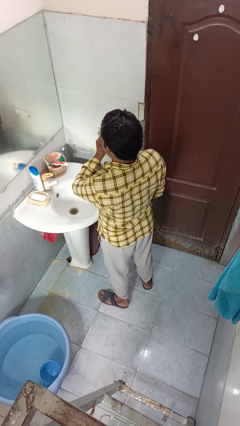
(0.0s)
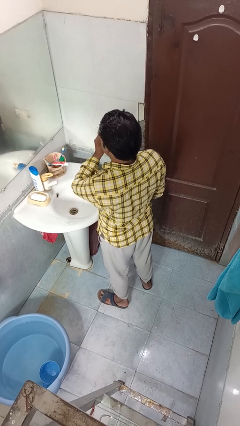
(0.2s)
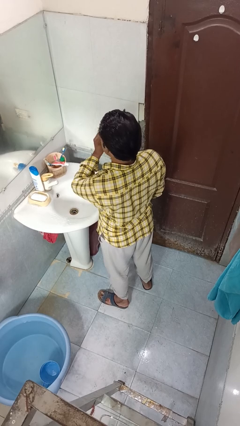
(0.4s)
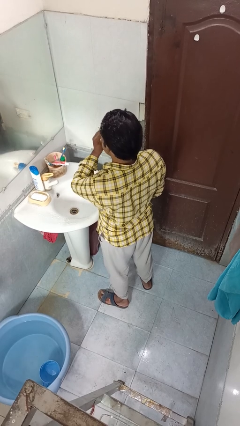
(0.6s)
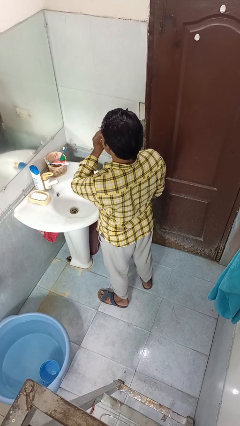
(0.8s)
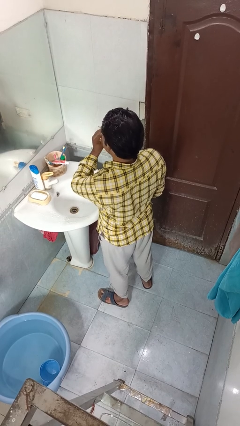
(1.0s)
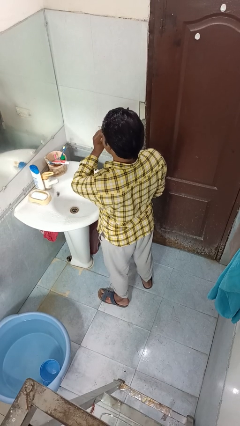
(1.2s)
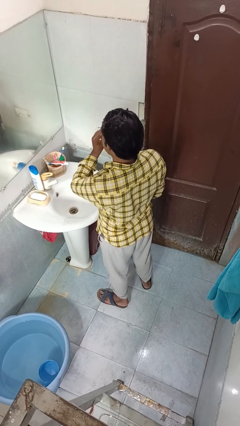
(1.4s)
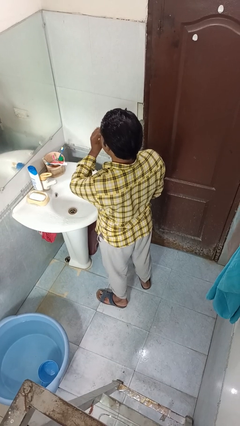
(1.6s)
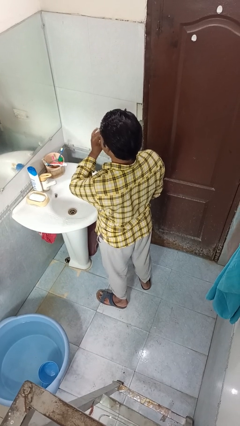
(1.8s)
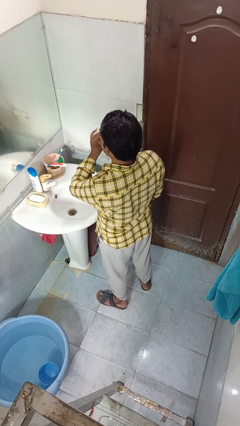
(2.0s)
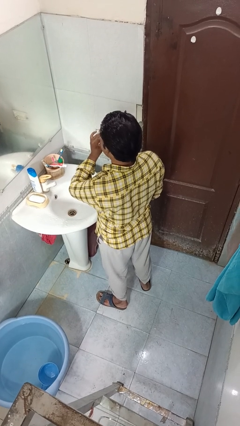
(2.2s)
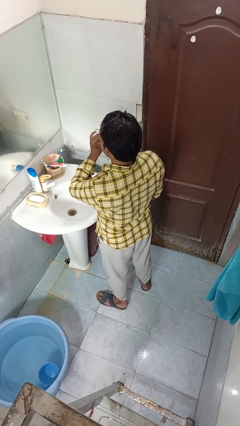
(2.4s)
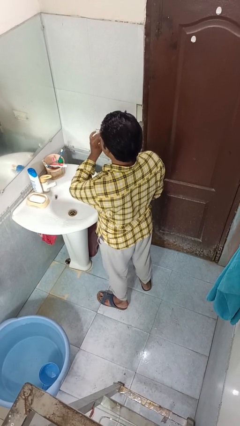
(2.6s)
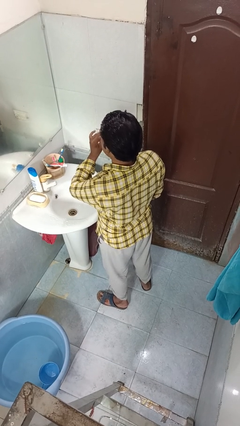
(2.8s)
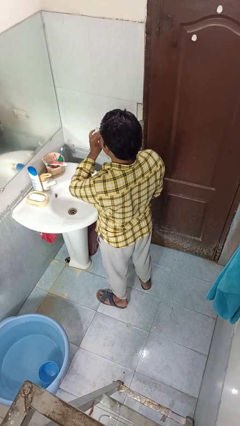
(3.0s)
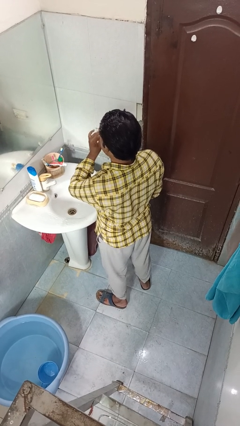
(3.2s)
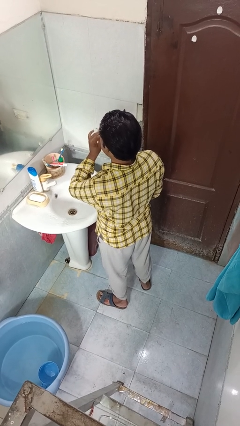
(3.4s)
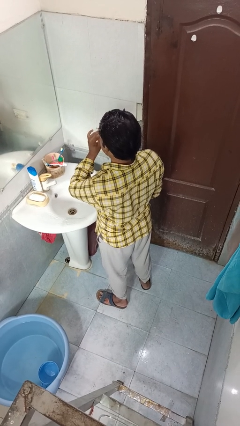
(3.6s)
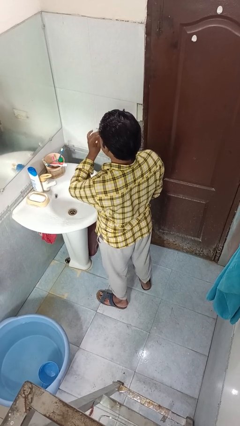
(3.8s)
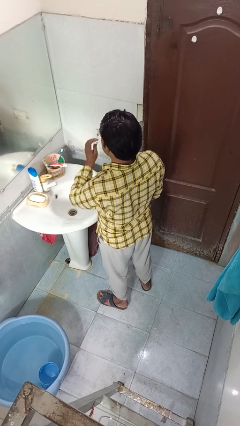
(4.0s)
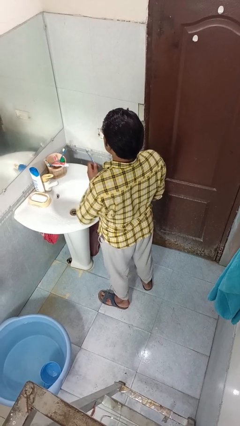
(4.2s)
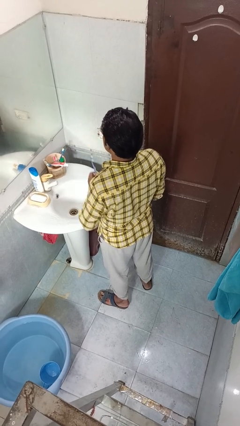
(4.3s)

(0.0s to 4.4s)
person brushes teeth

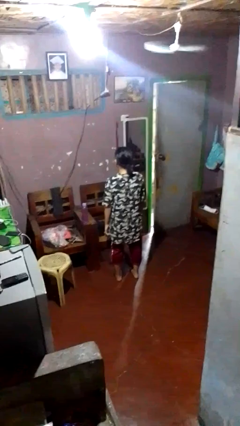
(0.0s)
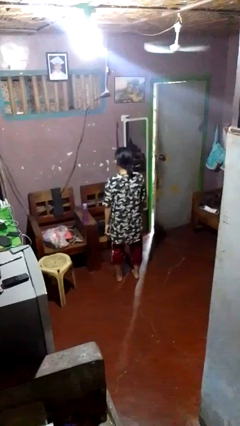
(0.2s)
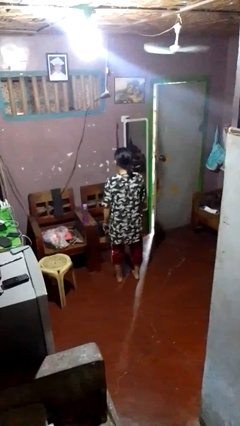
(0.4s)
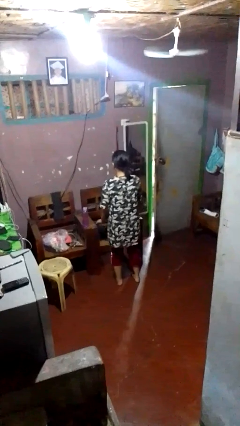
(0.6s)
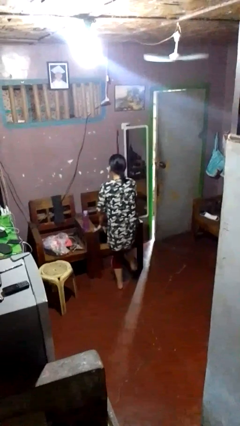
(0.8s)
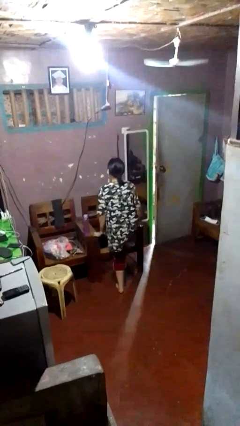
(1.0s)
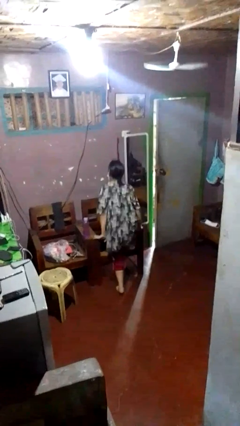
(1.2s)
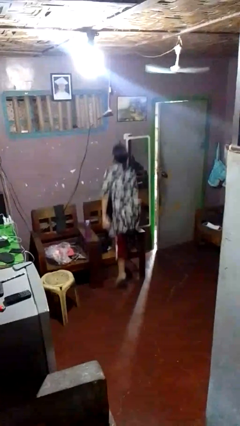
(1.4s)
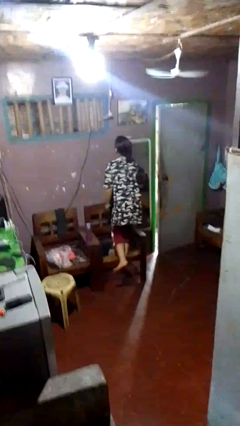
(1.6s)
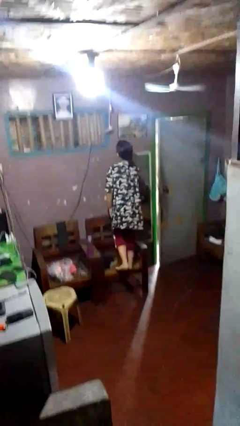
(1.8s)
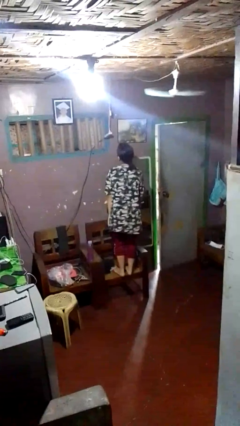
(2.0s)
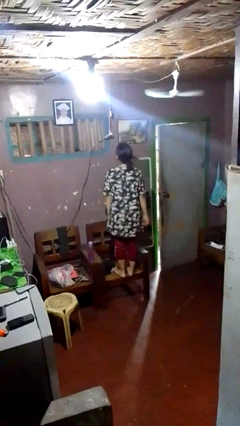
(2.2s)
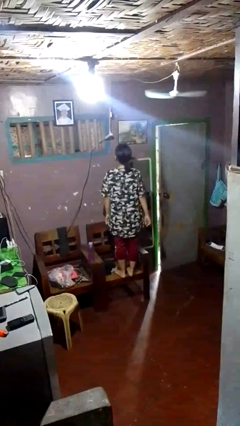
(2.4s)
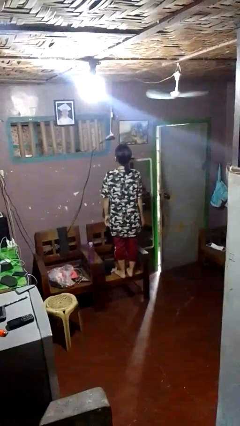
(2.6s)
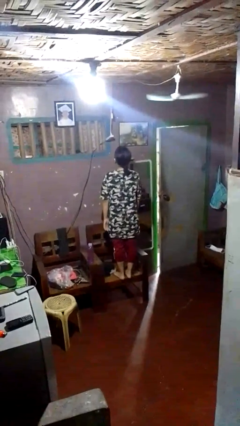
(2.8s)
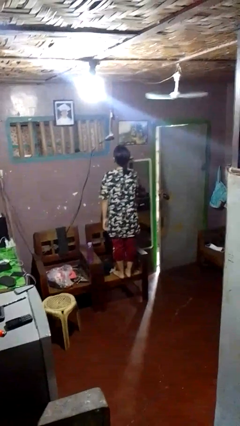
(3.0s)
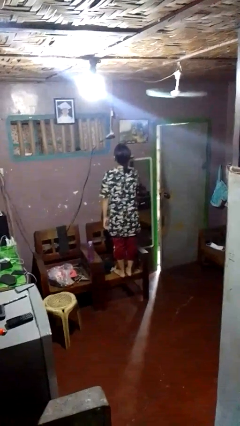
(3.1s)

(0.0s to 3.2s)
person climbs on chair

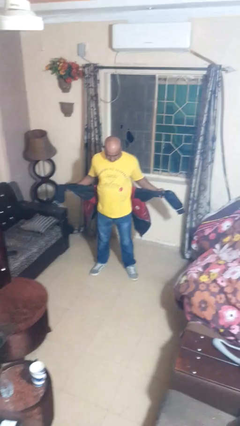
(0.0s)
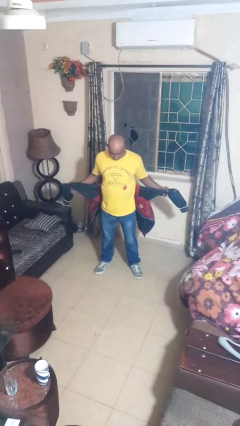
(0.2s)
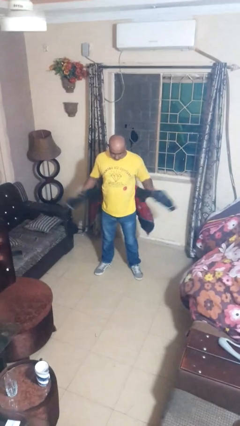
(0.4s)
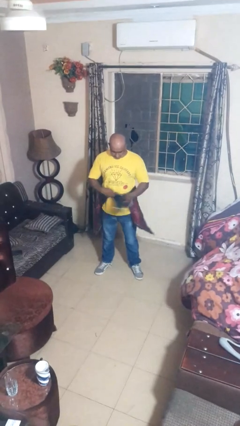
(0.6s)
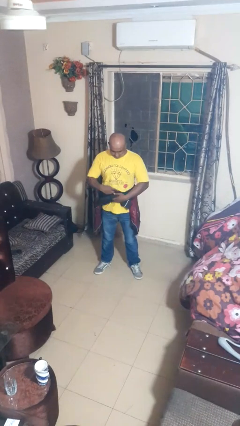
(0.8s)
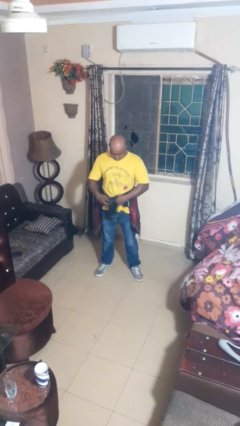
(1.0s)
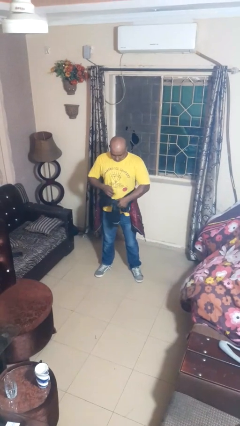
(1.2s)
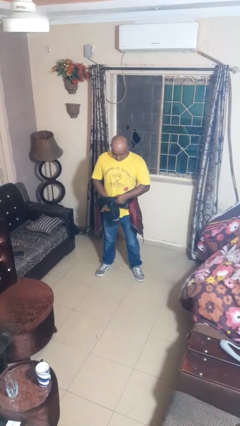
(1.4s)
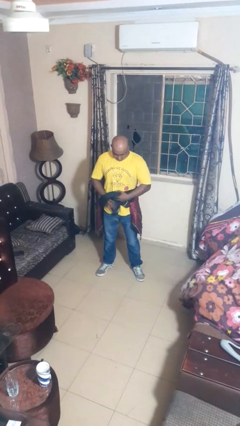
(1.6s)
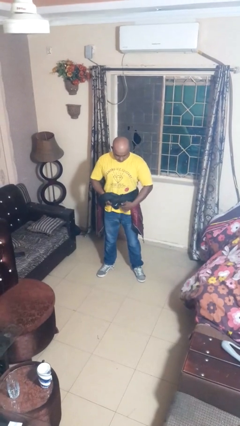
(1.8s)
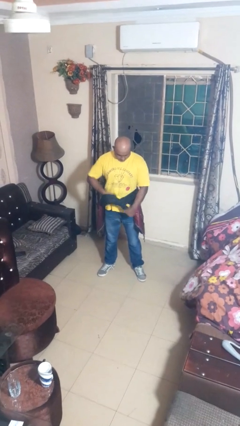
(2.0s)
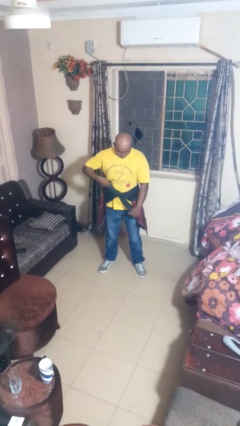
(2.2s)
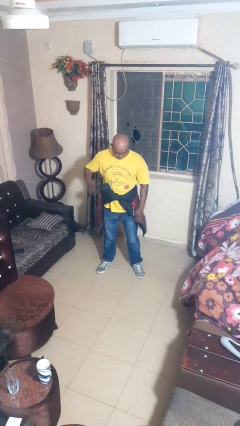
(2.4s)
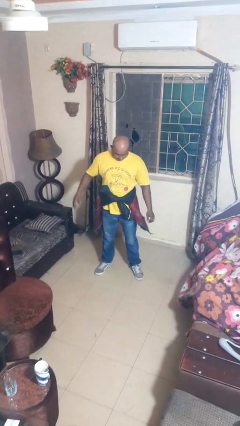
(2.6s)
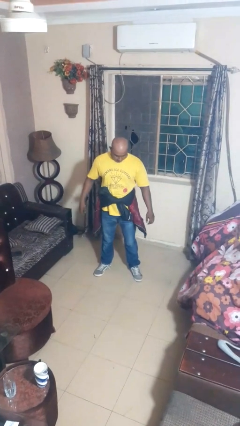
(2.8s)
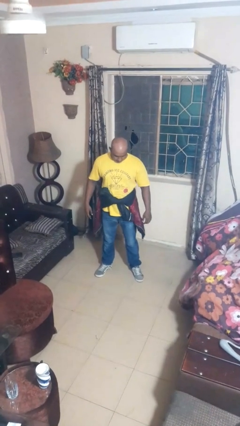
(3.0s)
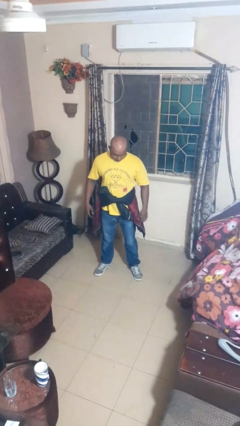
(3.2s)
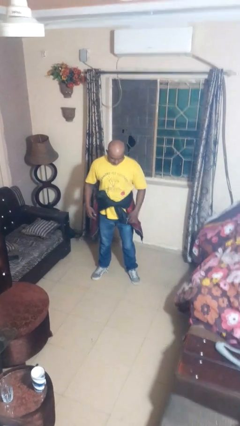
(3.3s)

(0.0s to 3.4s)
person ties jacket around waist

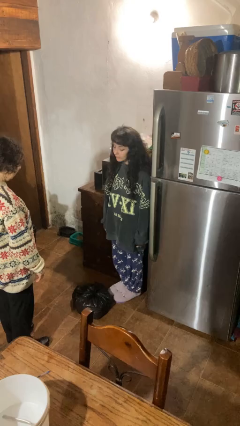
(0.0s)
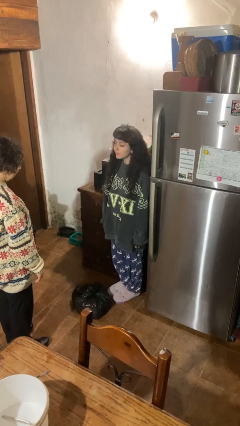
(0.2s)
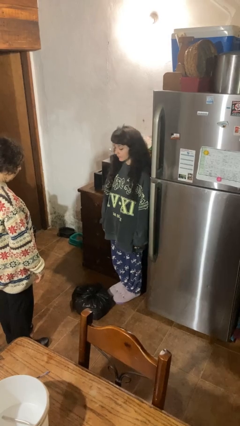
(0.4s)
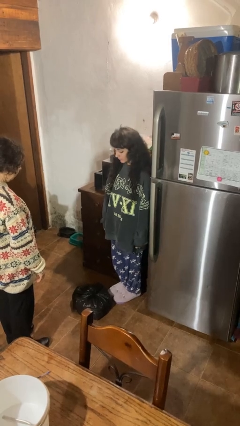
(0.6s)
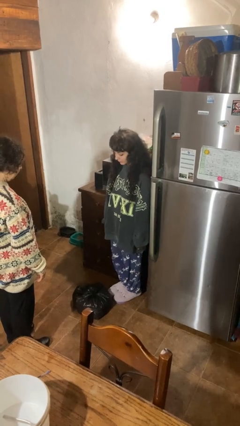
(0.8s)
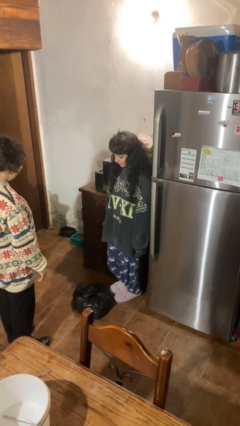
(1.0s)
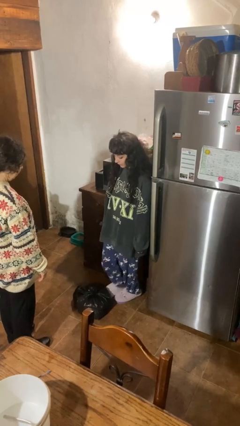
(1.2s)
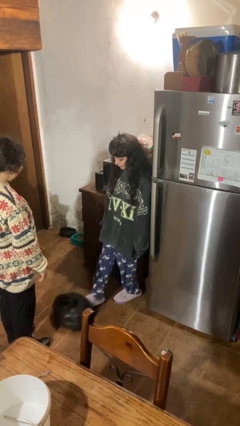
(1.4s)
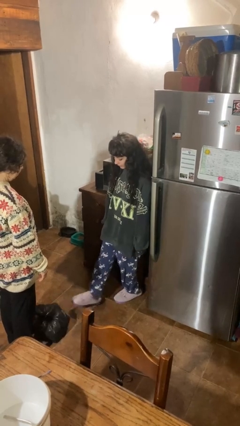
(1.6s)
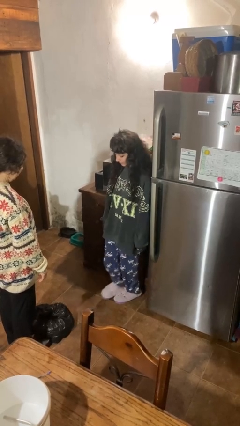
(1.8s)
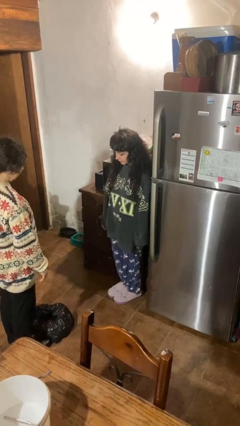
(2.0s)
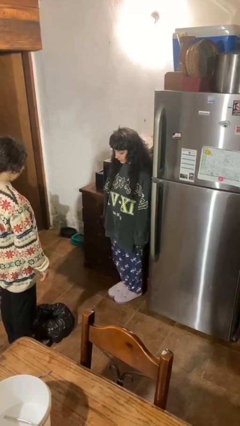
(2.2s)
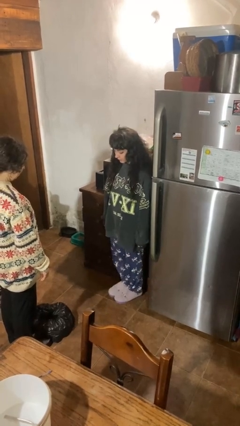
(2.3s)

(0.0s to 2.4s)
person kicks object to person

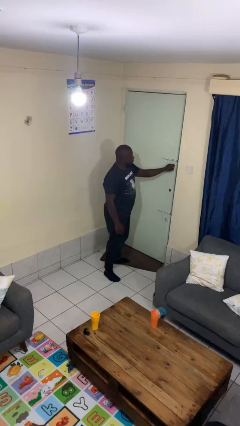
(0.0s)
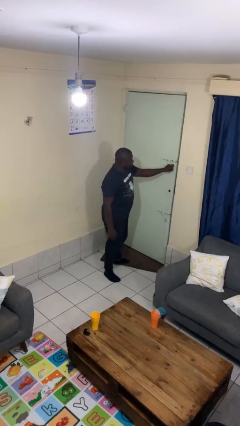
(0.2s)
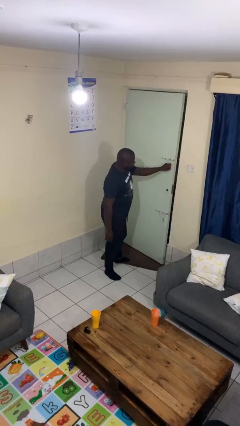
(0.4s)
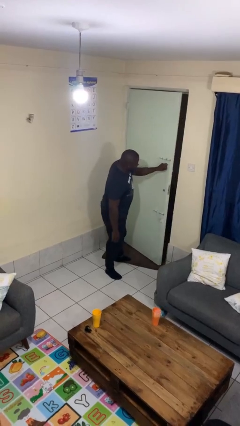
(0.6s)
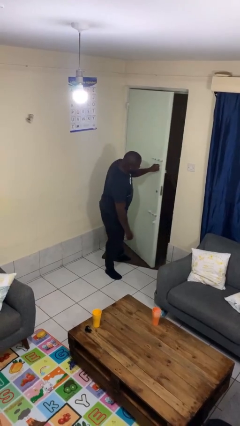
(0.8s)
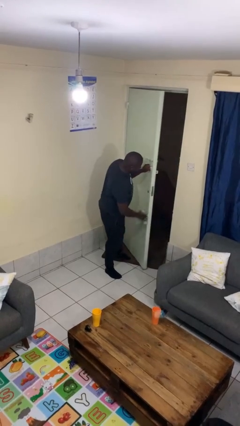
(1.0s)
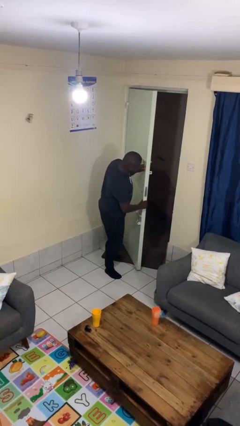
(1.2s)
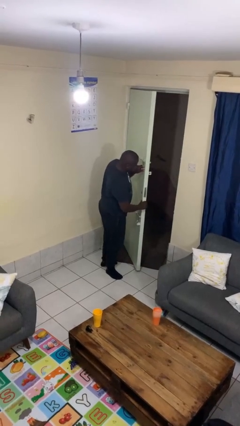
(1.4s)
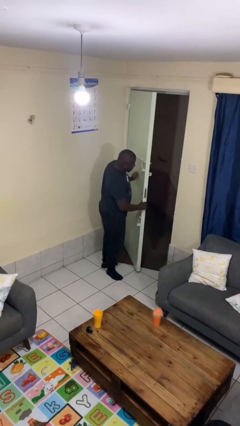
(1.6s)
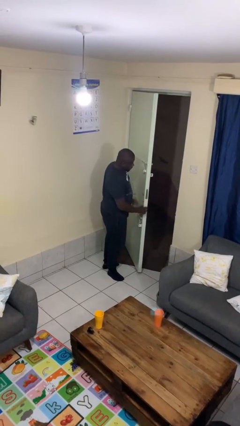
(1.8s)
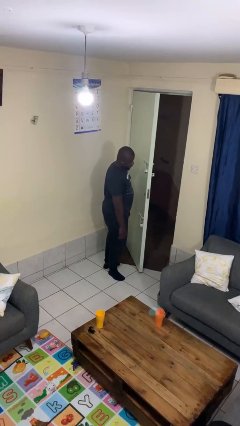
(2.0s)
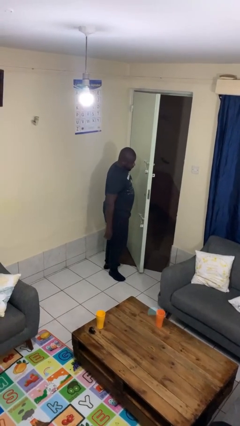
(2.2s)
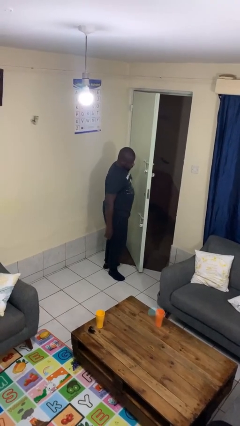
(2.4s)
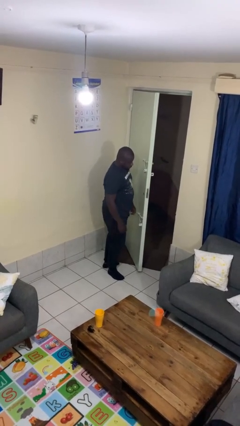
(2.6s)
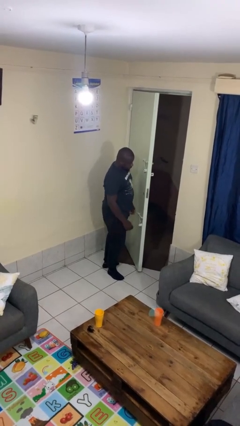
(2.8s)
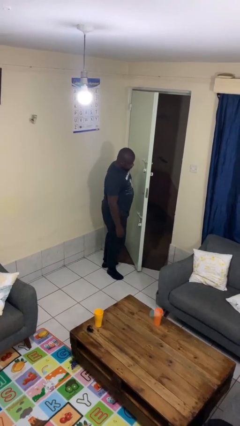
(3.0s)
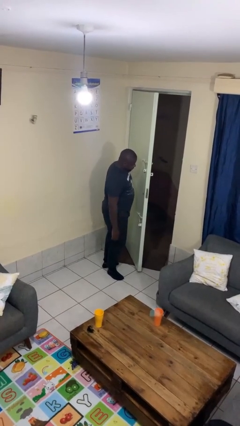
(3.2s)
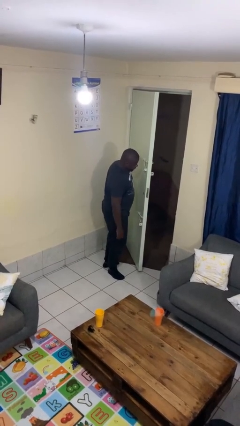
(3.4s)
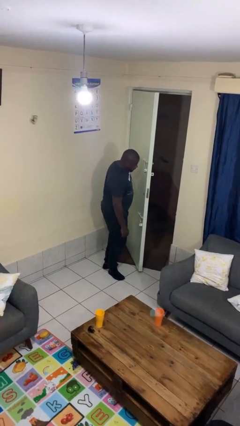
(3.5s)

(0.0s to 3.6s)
person opens facility door
